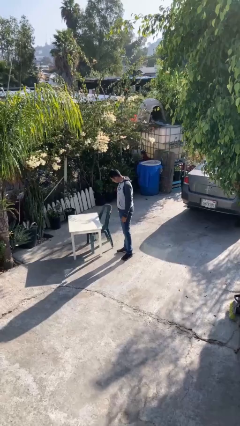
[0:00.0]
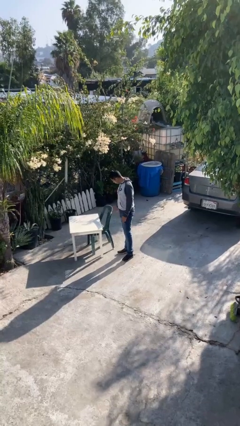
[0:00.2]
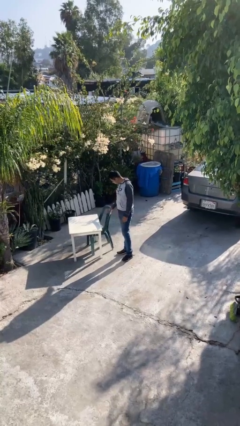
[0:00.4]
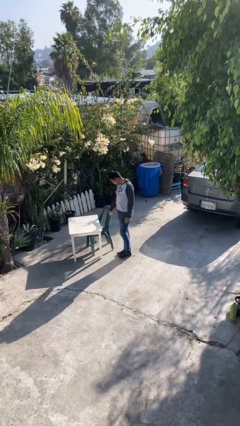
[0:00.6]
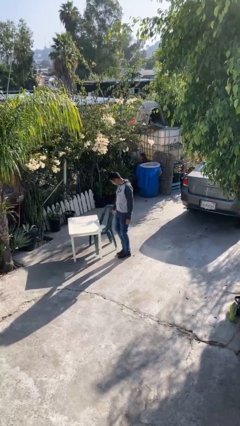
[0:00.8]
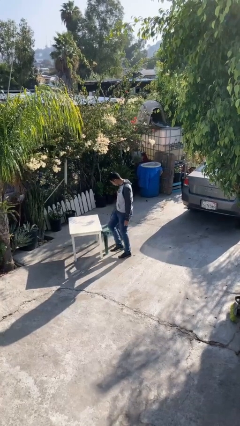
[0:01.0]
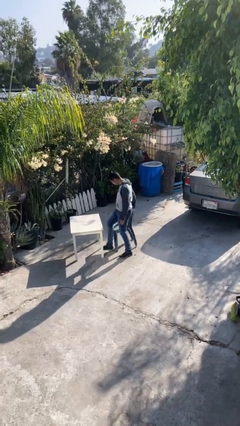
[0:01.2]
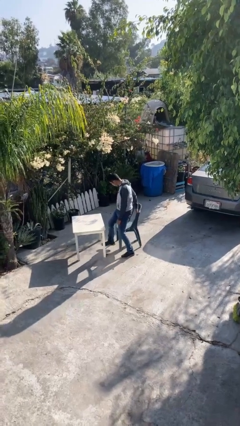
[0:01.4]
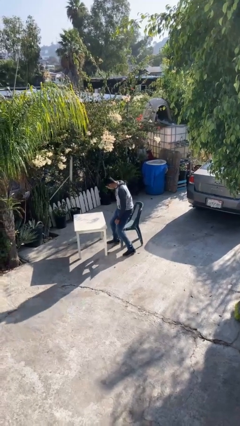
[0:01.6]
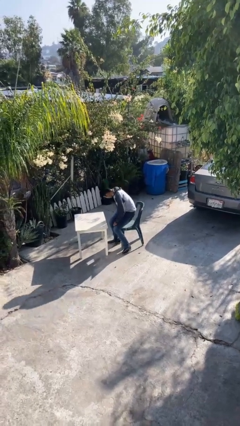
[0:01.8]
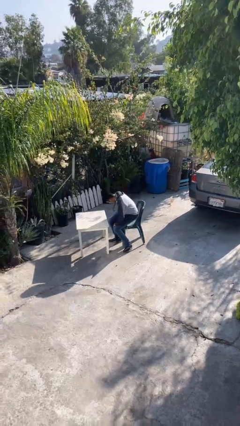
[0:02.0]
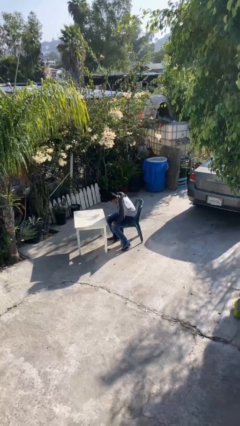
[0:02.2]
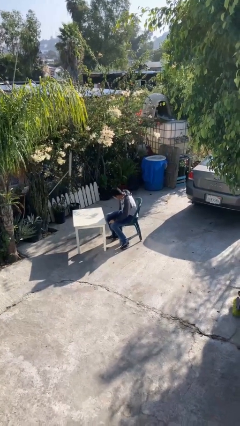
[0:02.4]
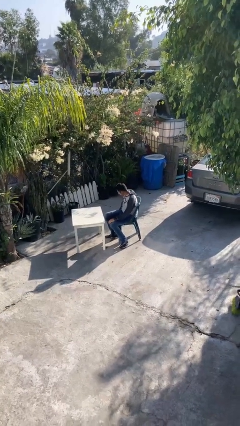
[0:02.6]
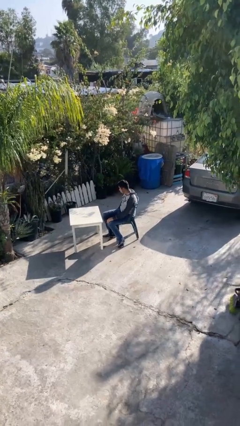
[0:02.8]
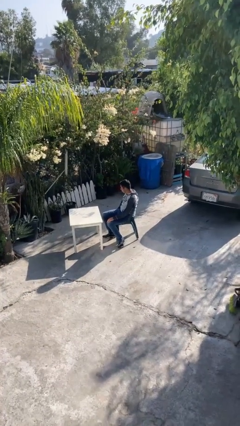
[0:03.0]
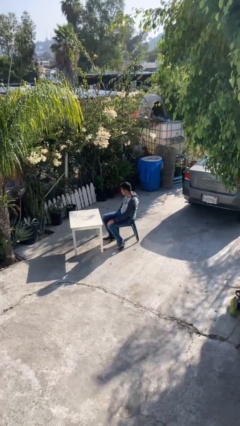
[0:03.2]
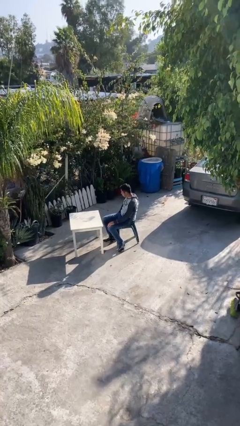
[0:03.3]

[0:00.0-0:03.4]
person sits down

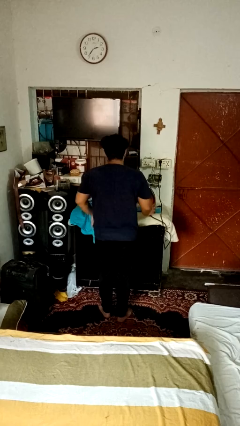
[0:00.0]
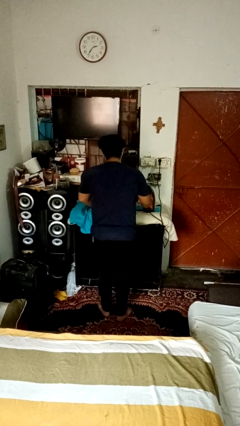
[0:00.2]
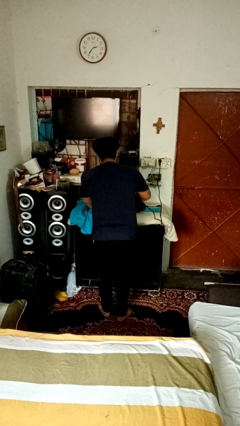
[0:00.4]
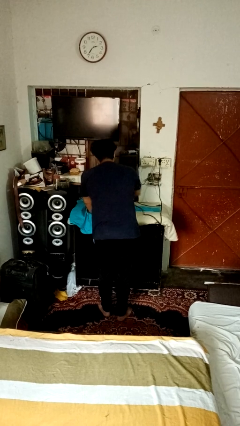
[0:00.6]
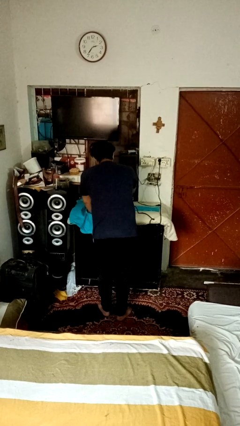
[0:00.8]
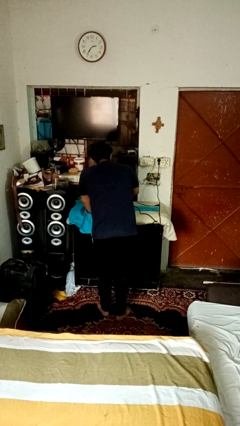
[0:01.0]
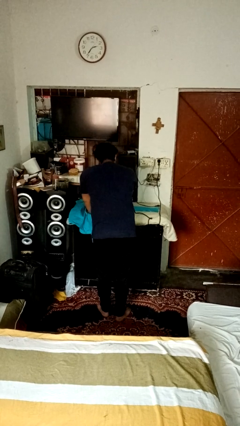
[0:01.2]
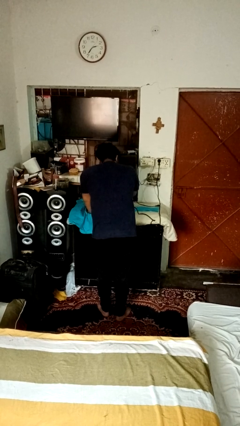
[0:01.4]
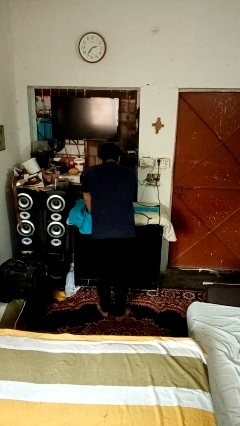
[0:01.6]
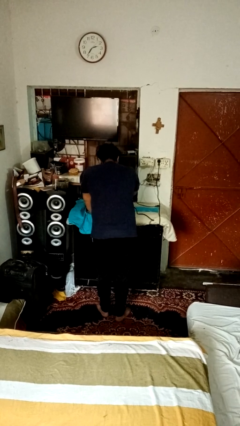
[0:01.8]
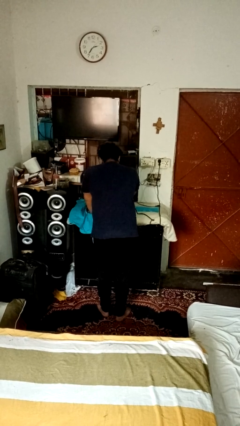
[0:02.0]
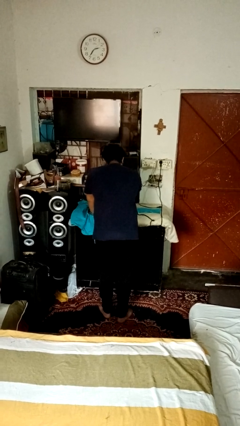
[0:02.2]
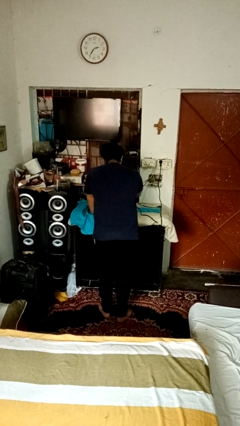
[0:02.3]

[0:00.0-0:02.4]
person irons clothes

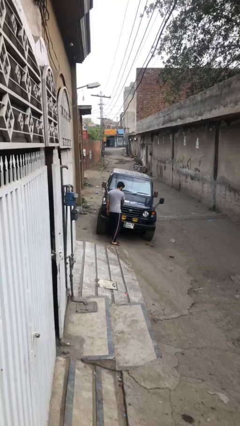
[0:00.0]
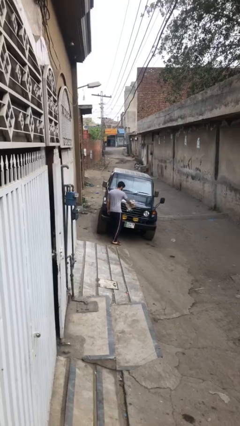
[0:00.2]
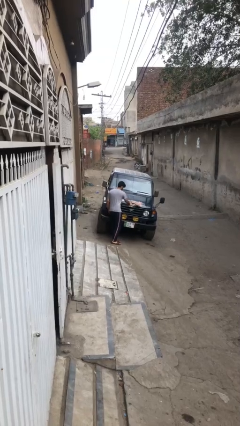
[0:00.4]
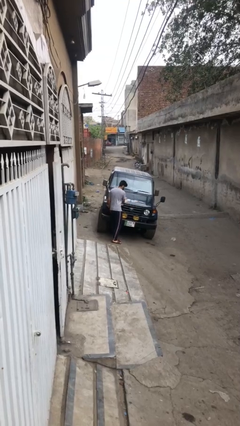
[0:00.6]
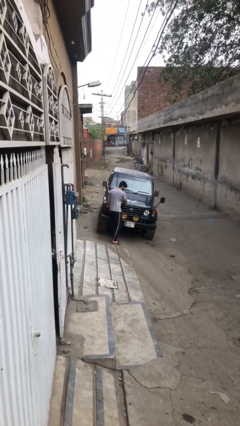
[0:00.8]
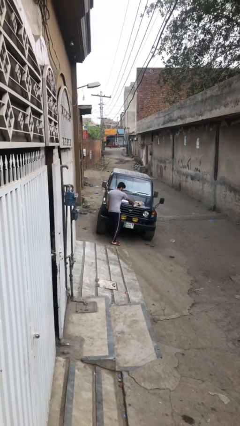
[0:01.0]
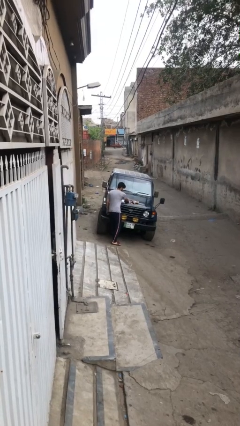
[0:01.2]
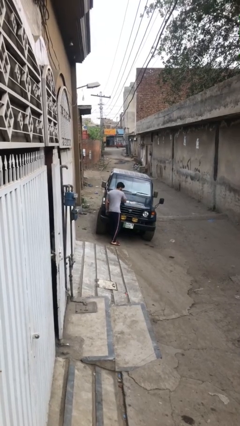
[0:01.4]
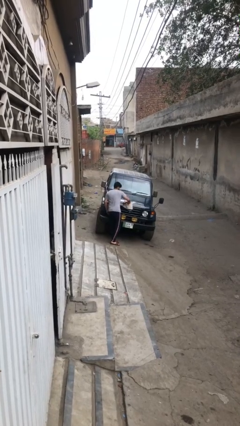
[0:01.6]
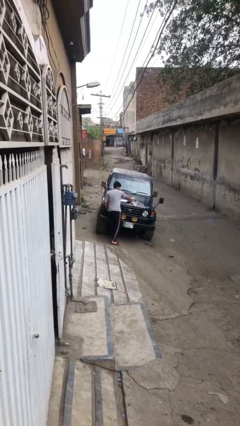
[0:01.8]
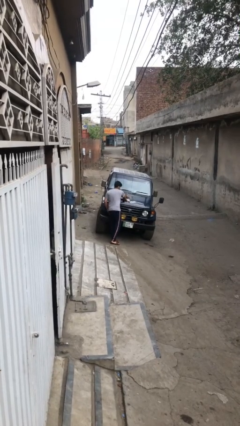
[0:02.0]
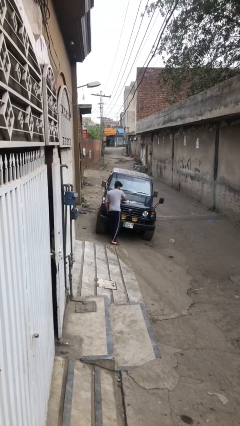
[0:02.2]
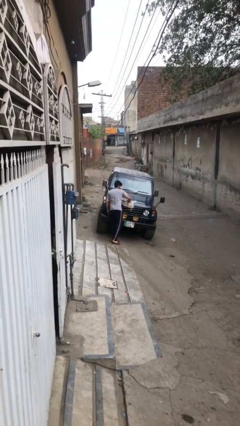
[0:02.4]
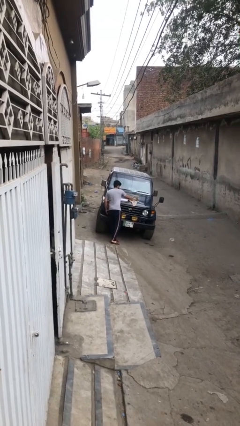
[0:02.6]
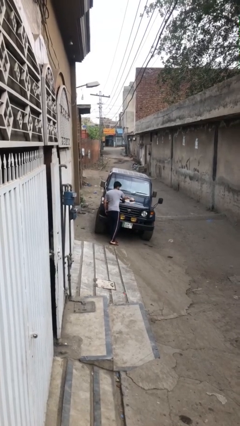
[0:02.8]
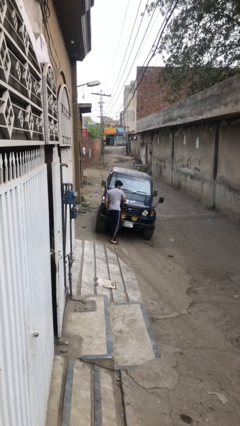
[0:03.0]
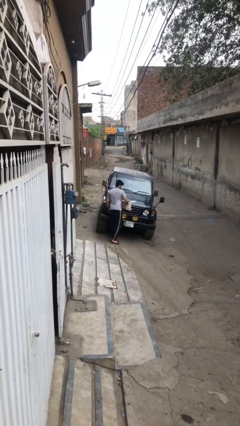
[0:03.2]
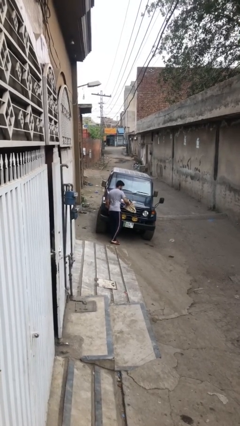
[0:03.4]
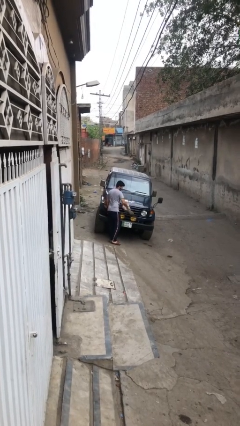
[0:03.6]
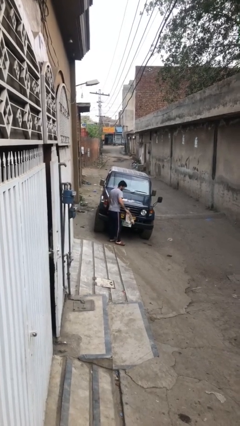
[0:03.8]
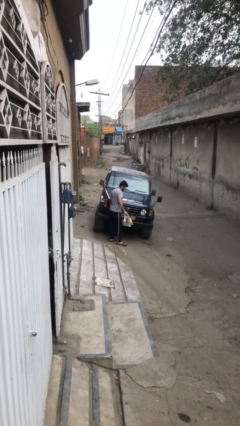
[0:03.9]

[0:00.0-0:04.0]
person polishes car with rag

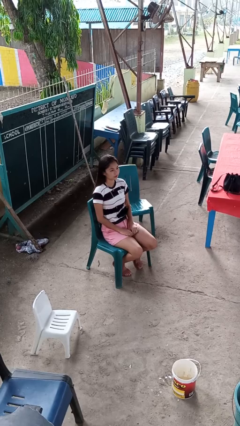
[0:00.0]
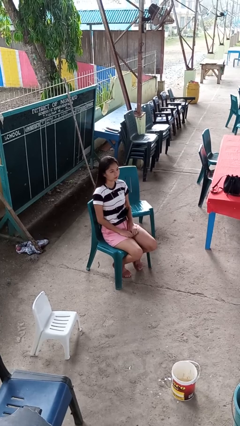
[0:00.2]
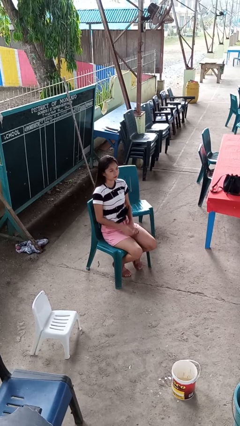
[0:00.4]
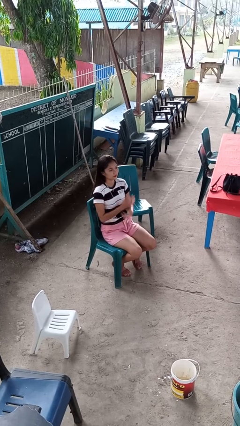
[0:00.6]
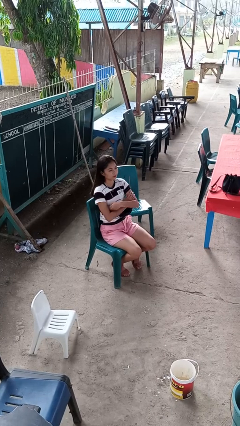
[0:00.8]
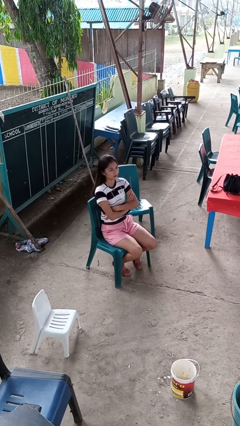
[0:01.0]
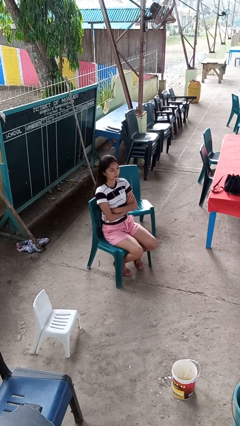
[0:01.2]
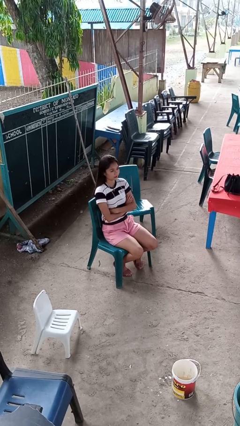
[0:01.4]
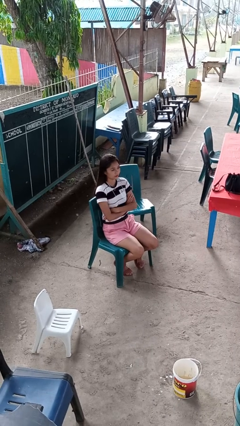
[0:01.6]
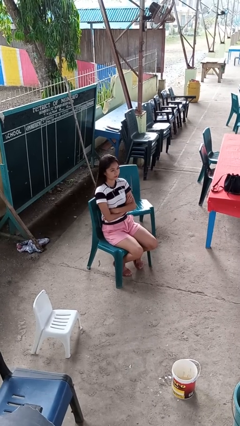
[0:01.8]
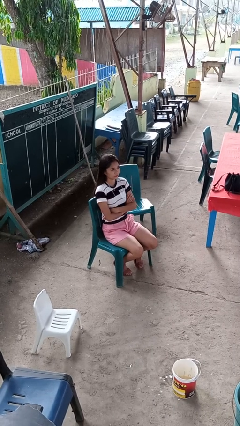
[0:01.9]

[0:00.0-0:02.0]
person gestures arms x

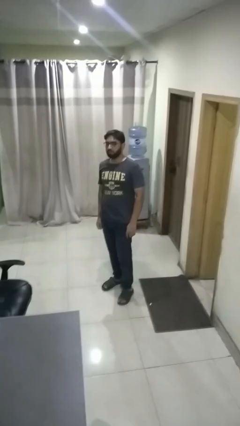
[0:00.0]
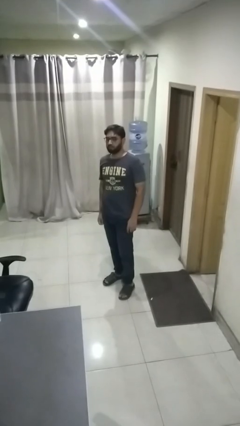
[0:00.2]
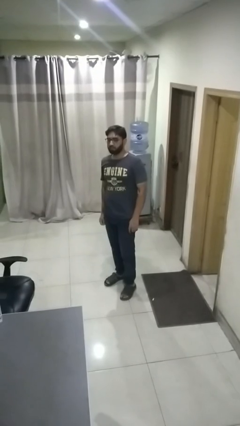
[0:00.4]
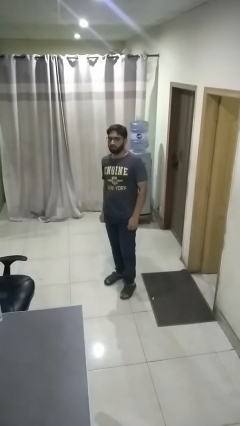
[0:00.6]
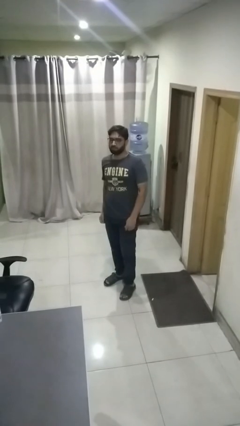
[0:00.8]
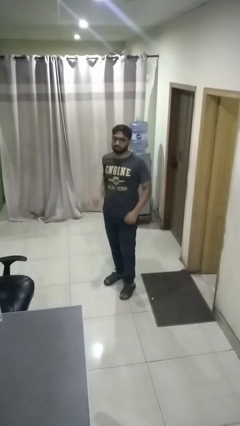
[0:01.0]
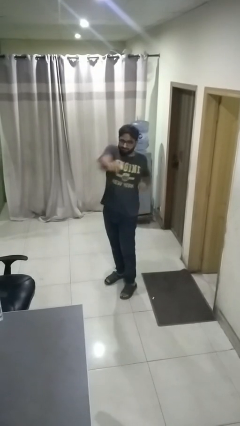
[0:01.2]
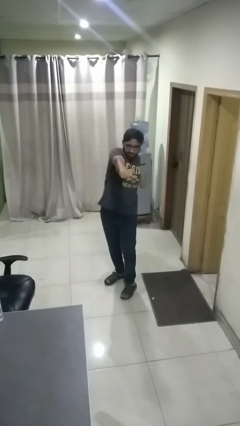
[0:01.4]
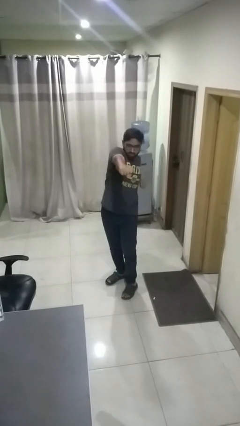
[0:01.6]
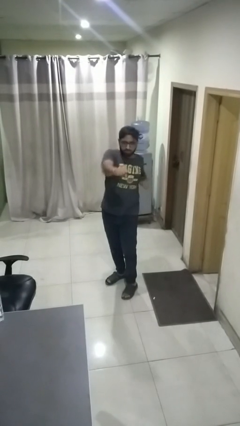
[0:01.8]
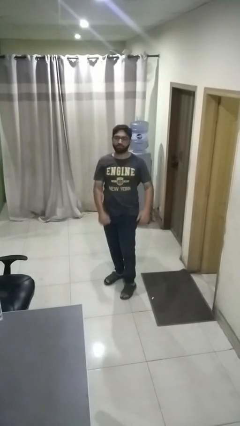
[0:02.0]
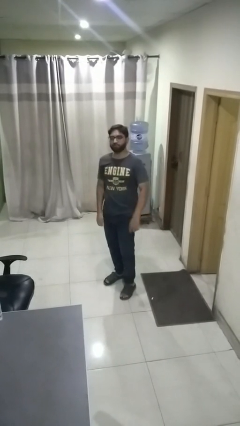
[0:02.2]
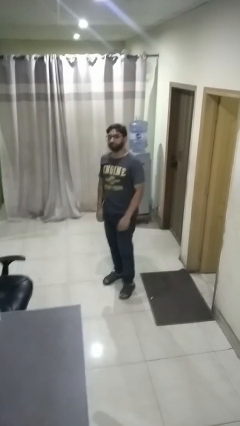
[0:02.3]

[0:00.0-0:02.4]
person punches

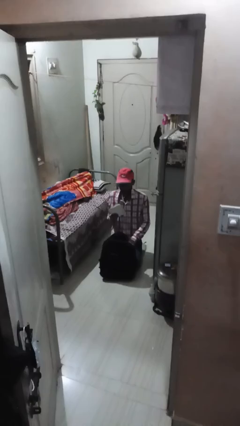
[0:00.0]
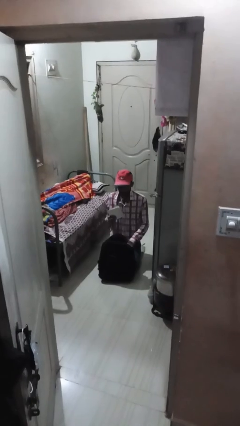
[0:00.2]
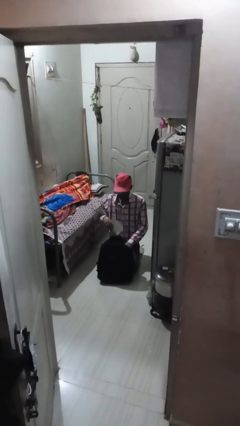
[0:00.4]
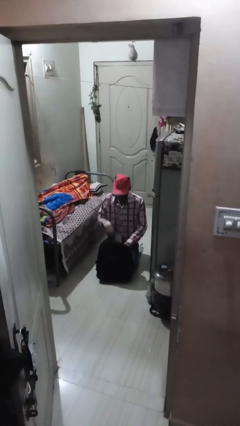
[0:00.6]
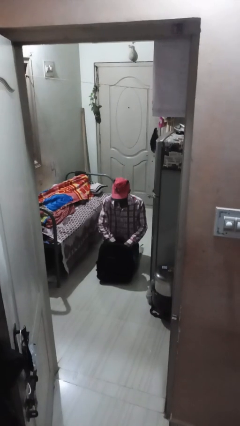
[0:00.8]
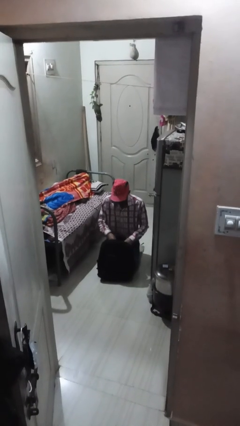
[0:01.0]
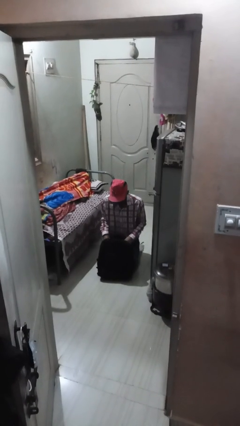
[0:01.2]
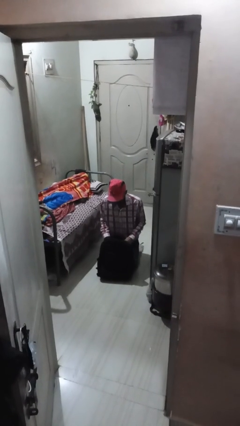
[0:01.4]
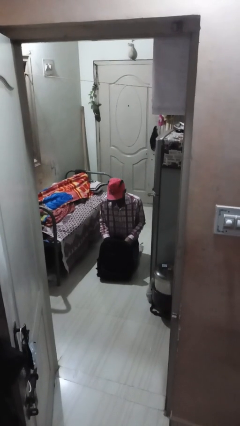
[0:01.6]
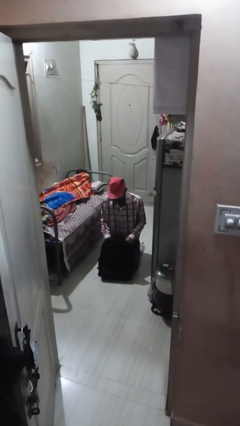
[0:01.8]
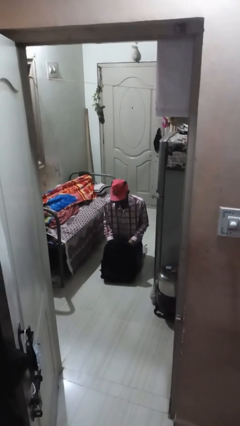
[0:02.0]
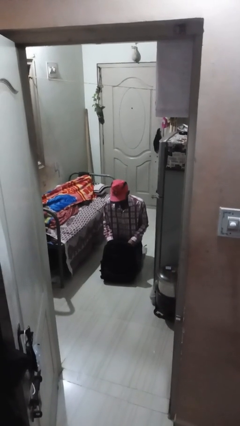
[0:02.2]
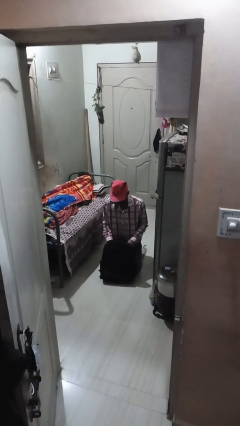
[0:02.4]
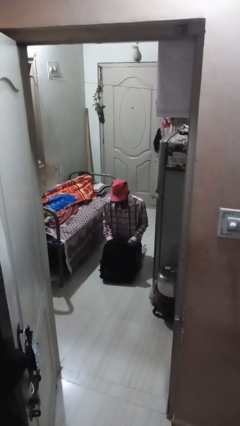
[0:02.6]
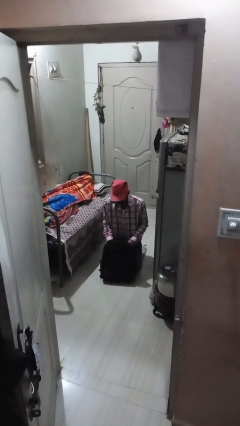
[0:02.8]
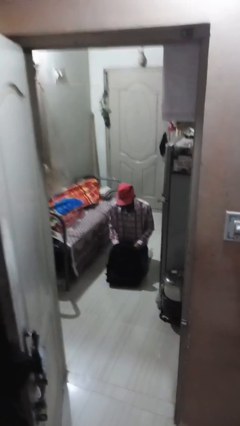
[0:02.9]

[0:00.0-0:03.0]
person puts object into backpack
